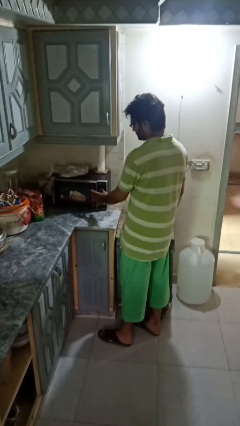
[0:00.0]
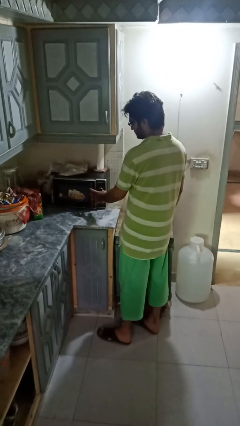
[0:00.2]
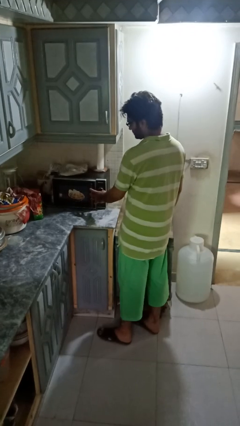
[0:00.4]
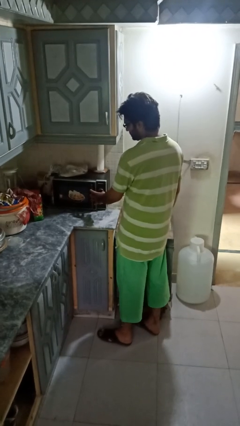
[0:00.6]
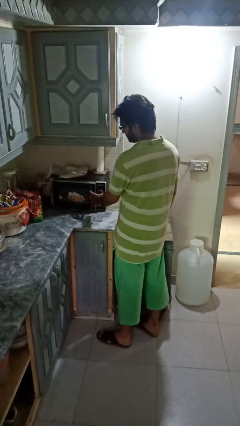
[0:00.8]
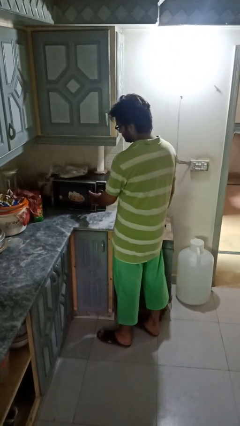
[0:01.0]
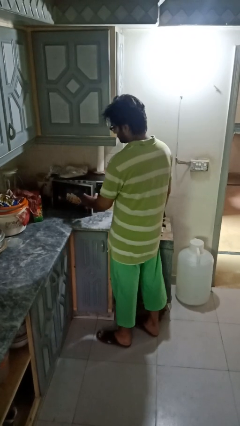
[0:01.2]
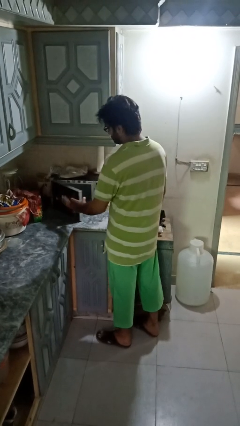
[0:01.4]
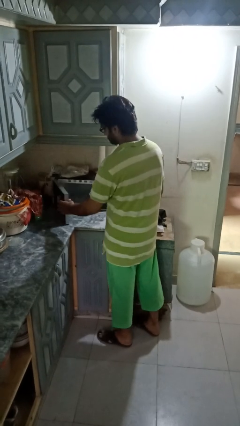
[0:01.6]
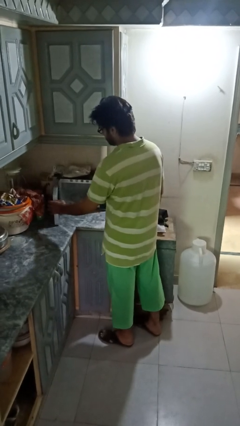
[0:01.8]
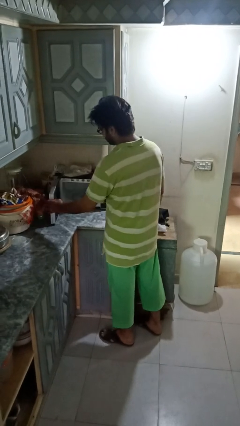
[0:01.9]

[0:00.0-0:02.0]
person opens microwave

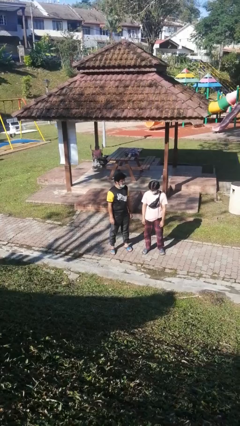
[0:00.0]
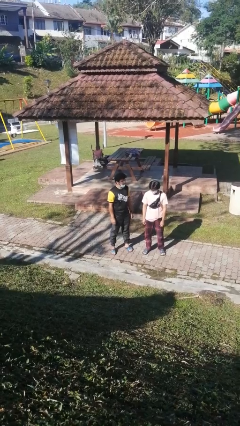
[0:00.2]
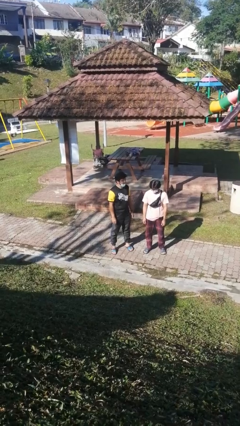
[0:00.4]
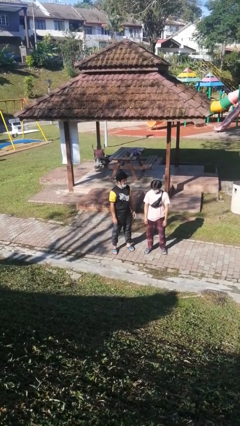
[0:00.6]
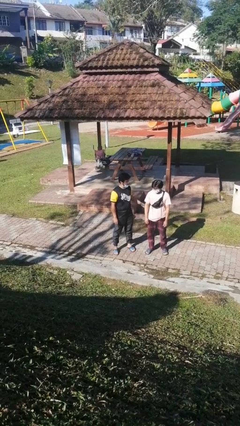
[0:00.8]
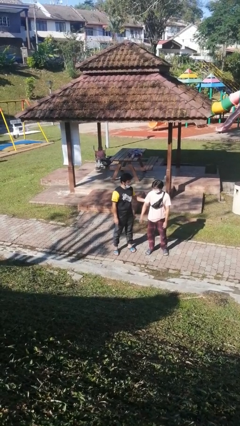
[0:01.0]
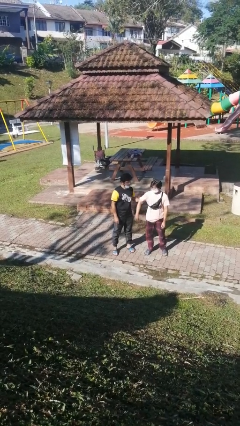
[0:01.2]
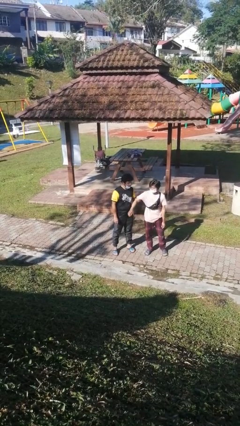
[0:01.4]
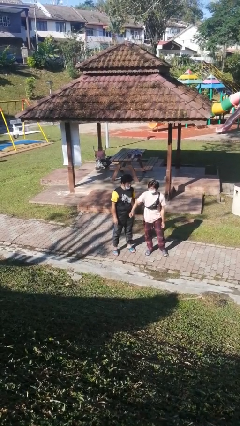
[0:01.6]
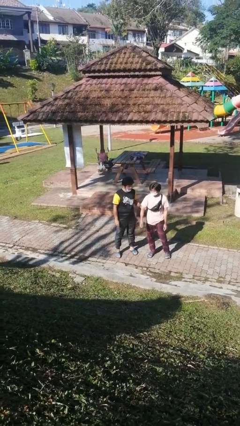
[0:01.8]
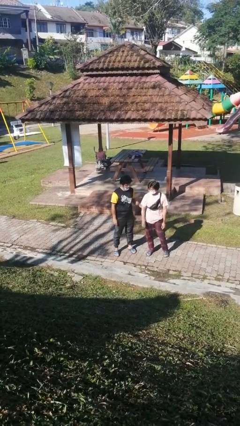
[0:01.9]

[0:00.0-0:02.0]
person grabs person by hair

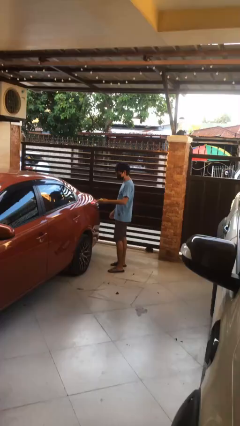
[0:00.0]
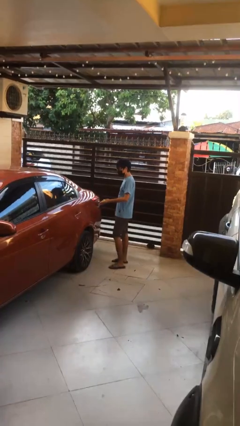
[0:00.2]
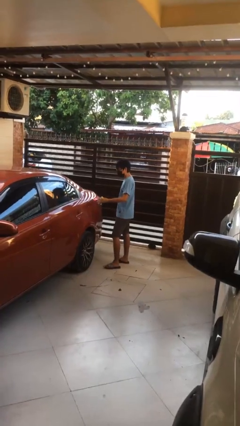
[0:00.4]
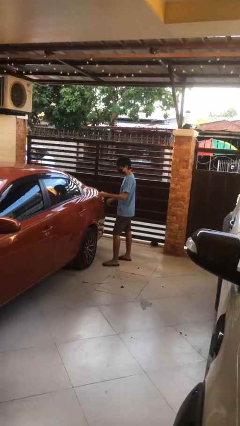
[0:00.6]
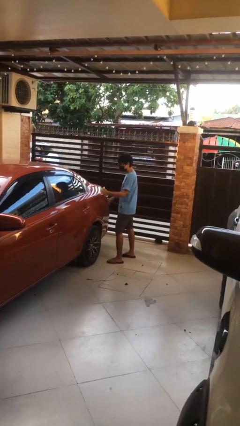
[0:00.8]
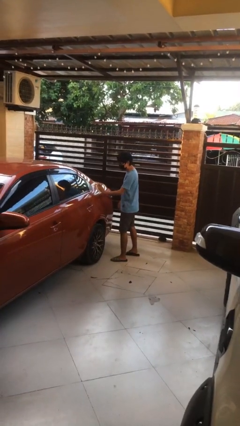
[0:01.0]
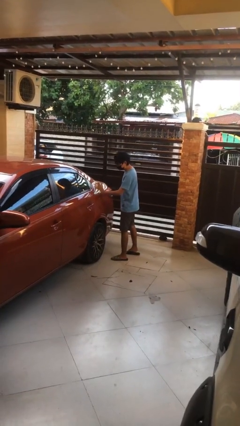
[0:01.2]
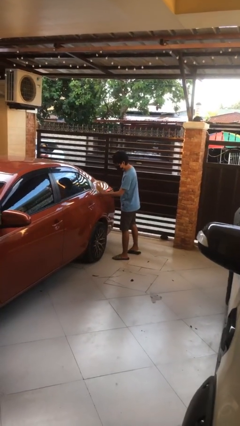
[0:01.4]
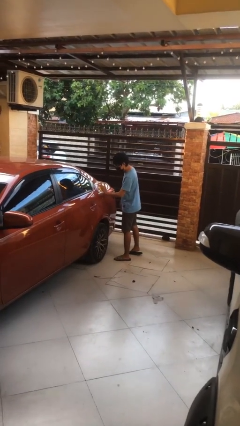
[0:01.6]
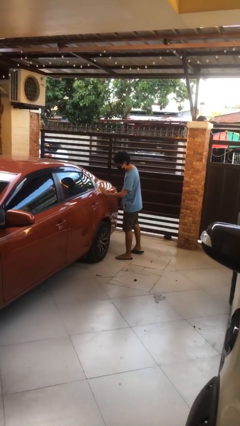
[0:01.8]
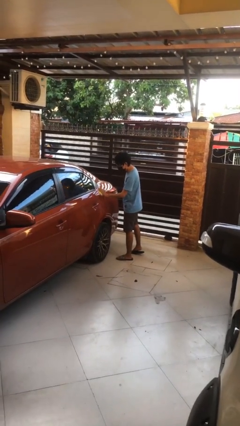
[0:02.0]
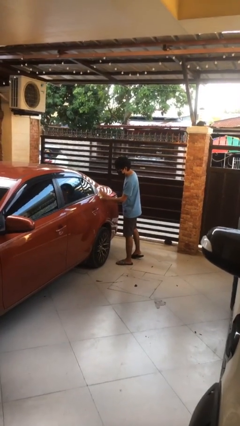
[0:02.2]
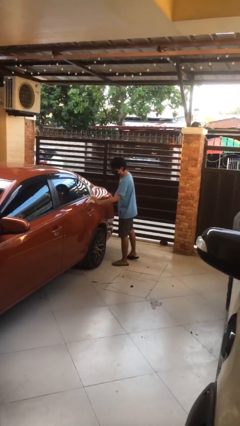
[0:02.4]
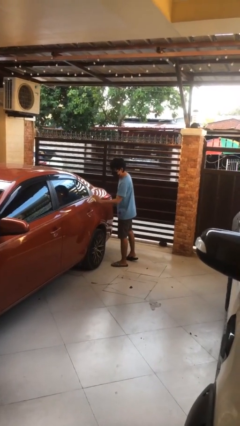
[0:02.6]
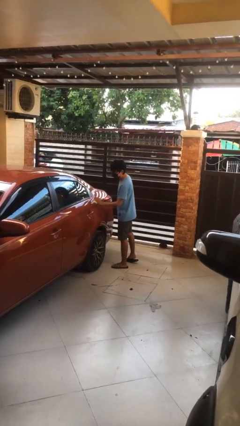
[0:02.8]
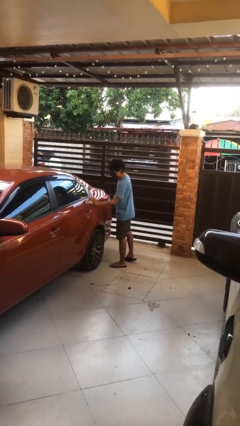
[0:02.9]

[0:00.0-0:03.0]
person polishes car with rag

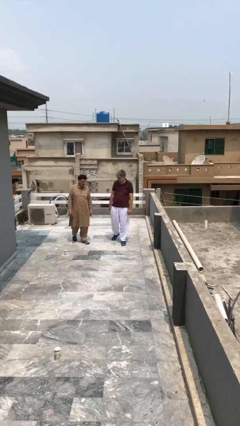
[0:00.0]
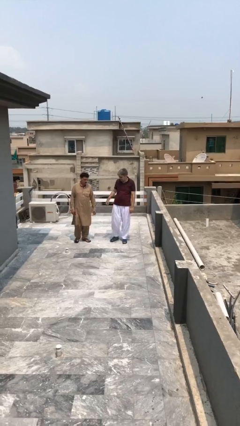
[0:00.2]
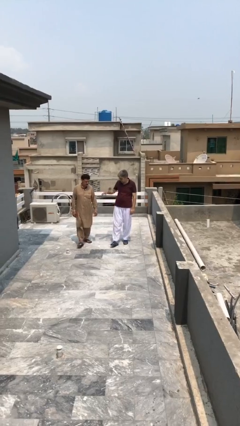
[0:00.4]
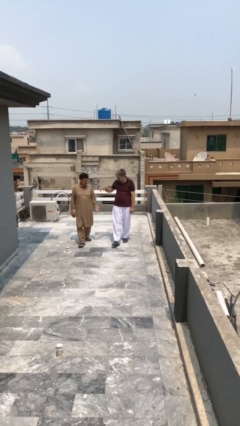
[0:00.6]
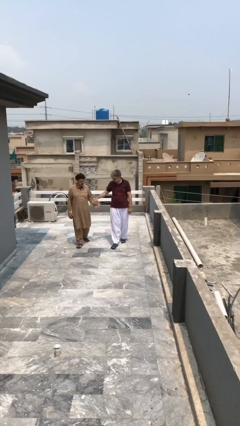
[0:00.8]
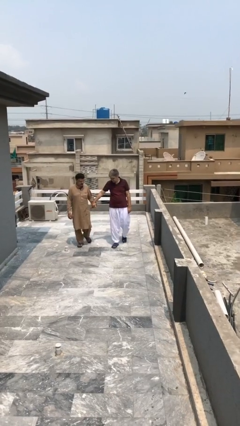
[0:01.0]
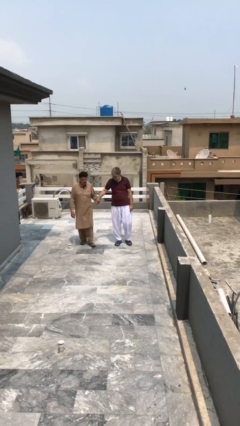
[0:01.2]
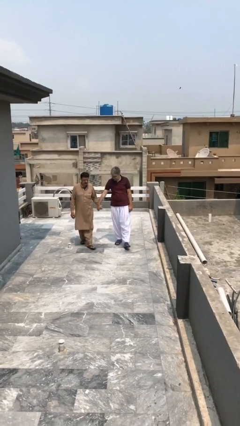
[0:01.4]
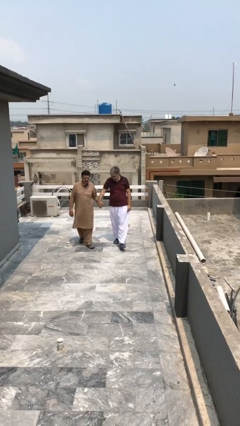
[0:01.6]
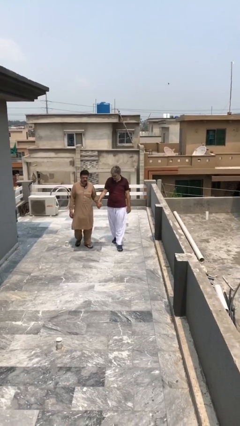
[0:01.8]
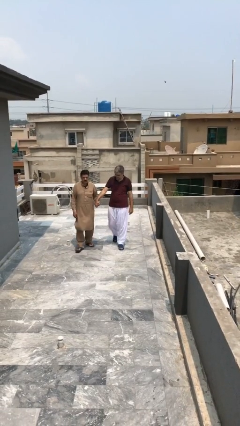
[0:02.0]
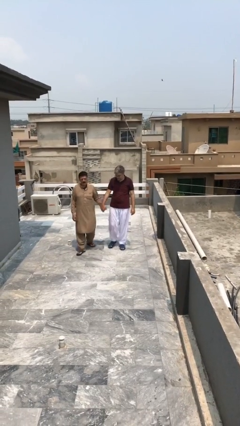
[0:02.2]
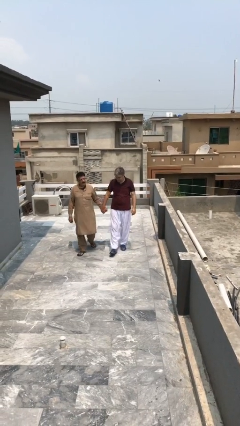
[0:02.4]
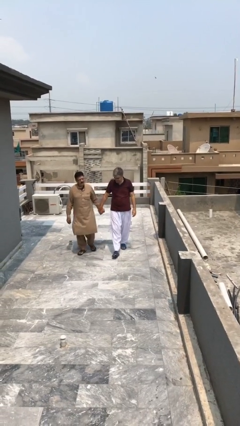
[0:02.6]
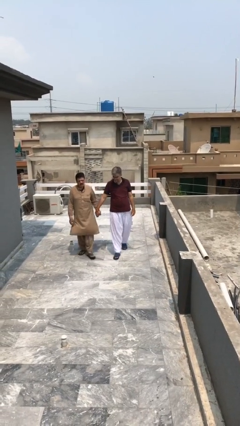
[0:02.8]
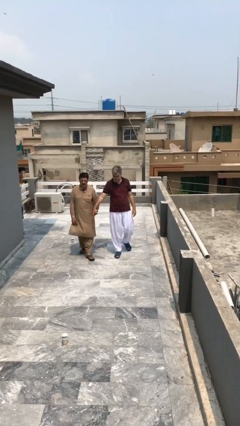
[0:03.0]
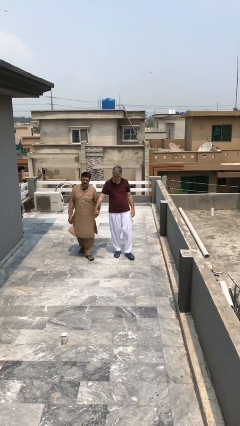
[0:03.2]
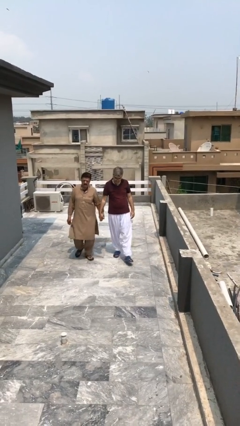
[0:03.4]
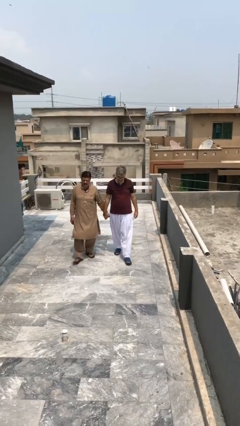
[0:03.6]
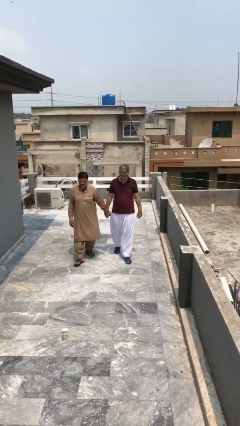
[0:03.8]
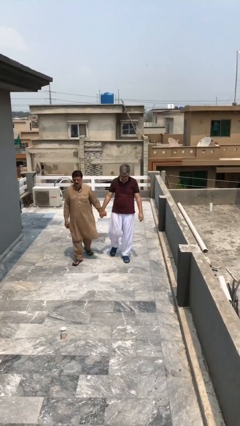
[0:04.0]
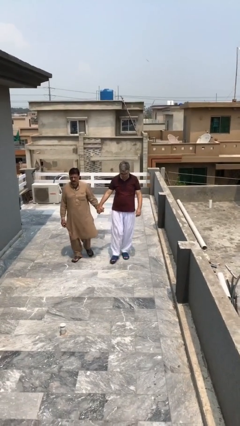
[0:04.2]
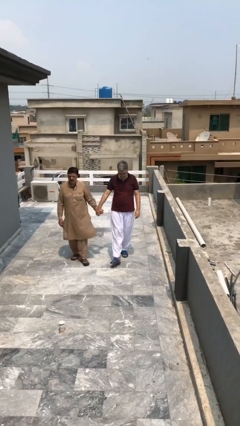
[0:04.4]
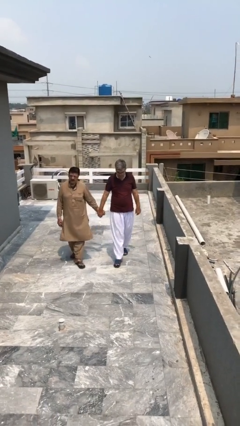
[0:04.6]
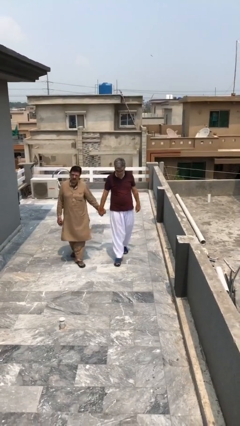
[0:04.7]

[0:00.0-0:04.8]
person holds hand

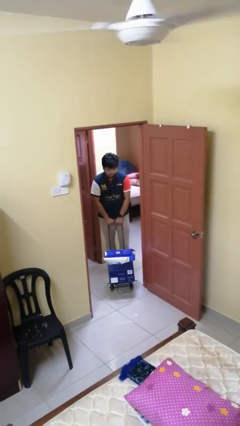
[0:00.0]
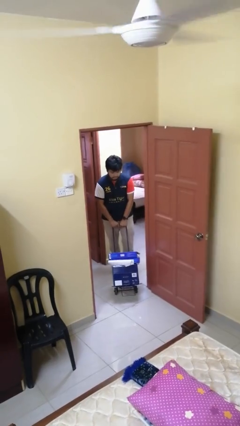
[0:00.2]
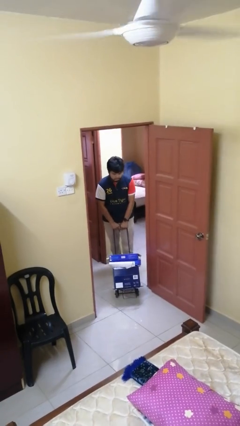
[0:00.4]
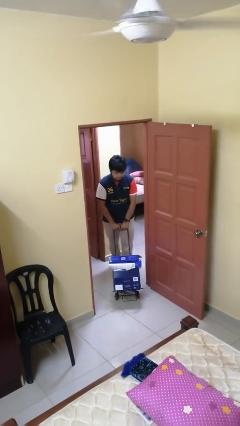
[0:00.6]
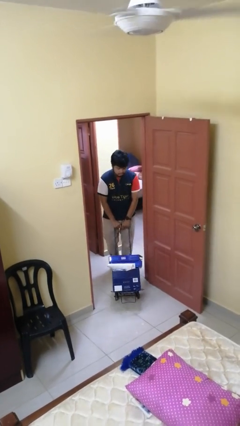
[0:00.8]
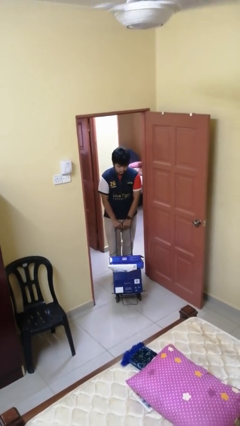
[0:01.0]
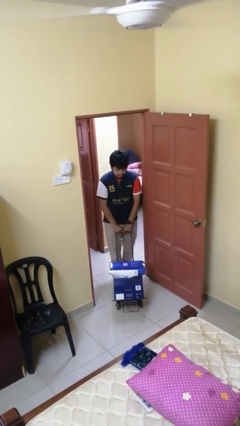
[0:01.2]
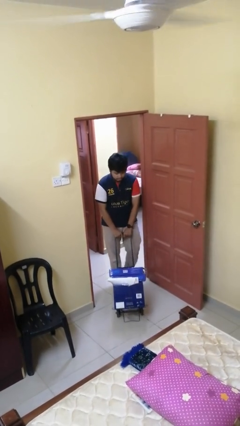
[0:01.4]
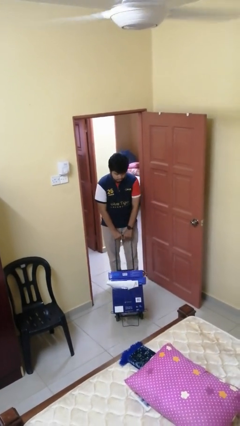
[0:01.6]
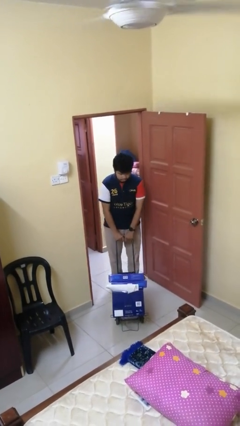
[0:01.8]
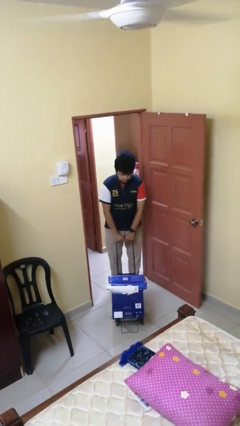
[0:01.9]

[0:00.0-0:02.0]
person pushes wheeled cart

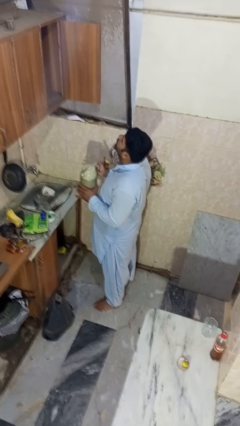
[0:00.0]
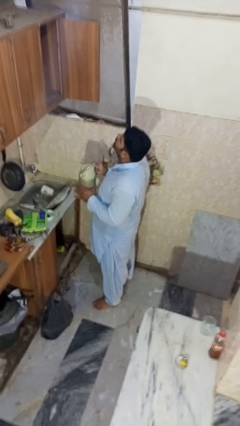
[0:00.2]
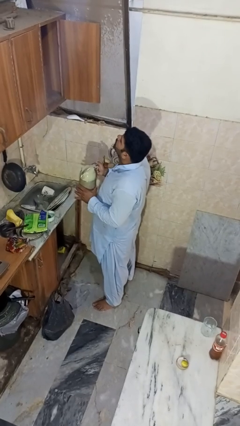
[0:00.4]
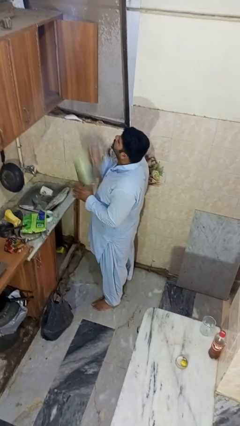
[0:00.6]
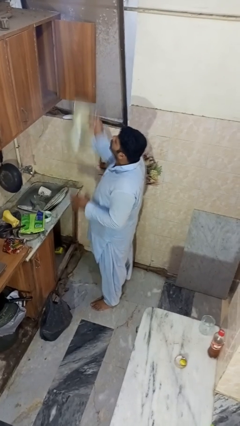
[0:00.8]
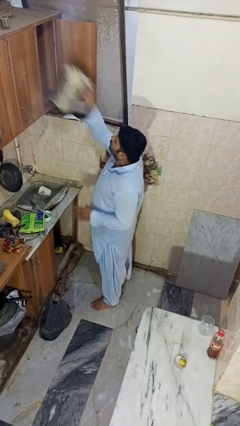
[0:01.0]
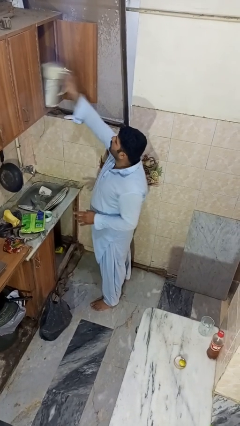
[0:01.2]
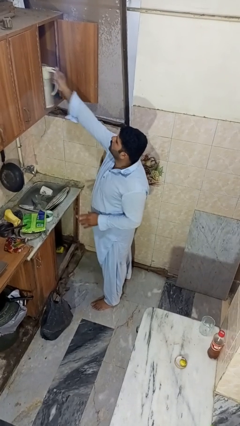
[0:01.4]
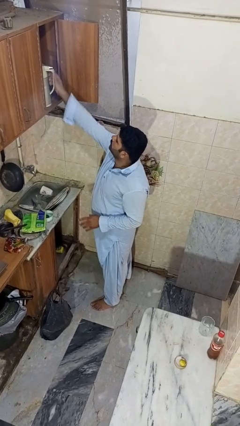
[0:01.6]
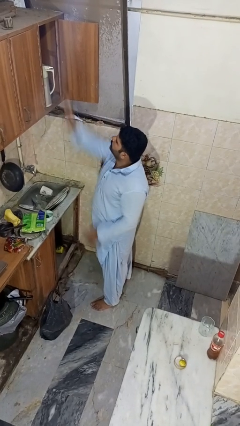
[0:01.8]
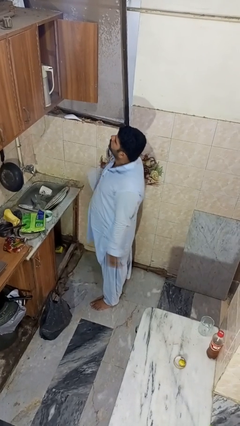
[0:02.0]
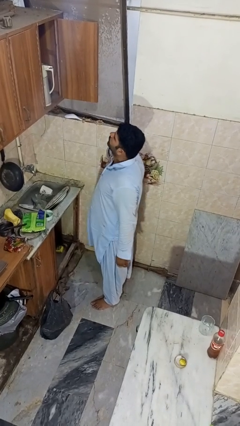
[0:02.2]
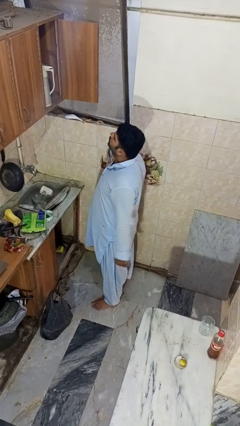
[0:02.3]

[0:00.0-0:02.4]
person puts object in cabinet

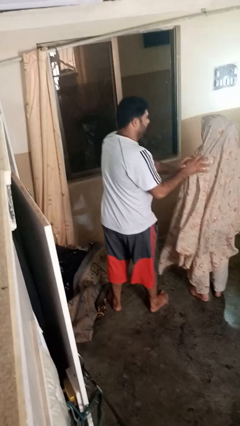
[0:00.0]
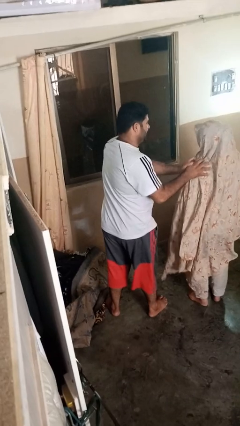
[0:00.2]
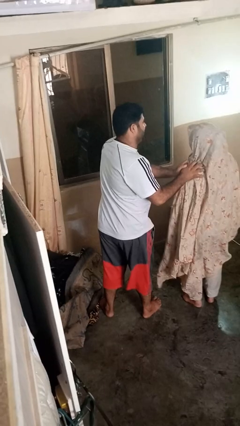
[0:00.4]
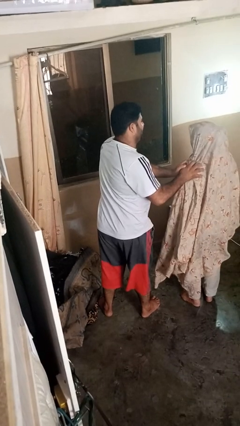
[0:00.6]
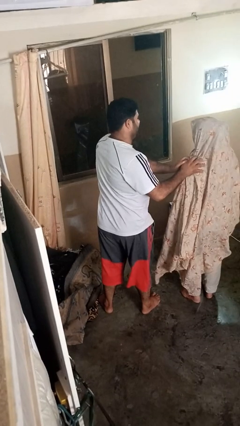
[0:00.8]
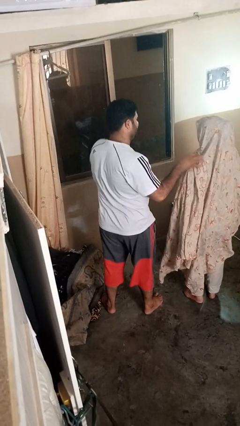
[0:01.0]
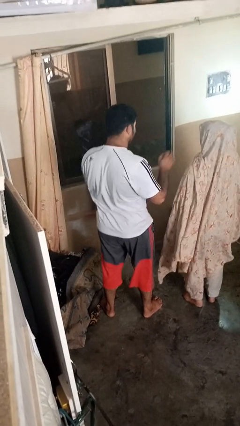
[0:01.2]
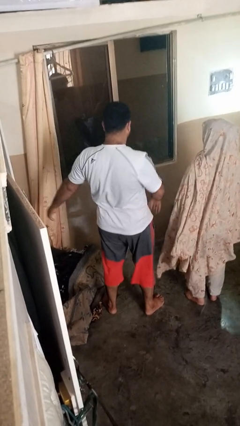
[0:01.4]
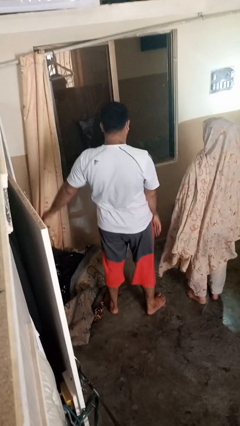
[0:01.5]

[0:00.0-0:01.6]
person shoves person
